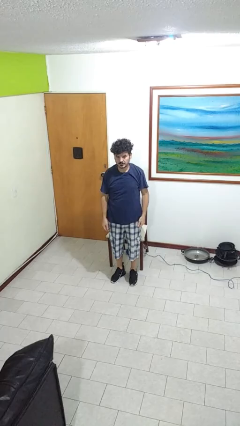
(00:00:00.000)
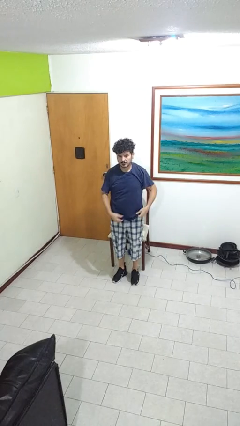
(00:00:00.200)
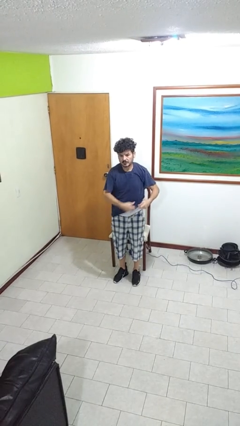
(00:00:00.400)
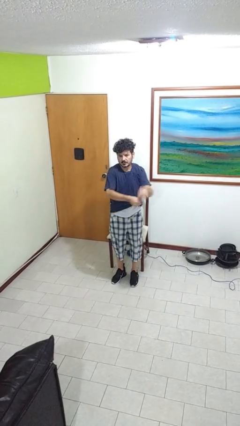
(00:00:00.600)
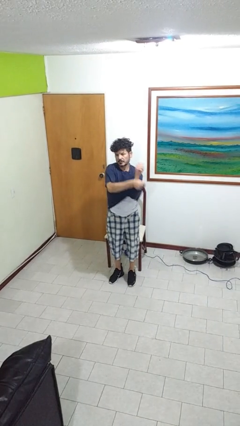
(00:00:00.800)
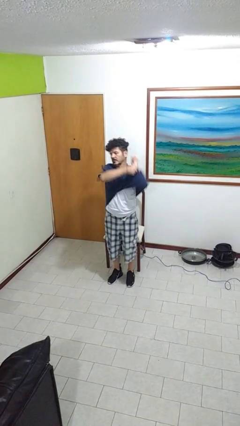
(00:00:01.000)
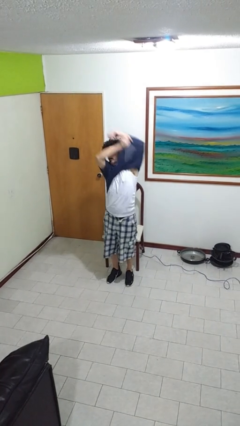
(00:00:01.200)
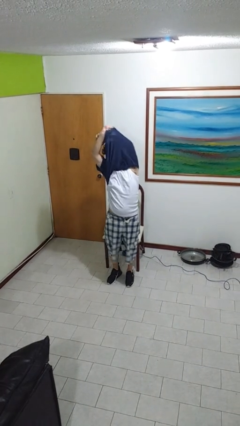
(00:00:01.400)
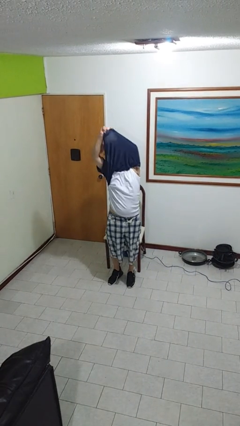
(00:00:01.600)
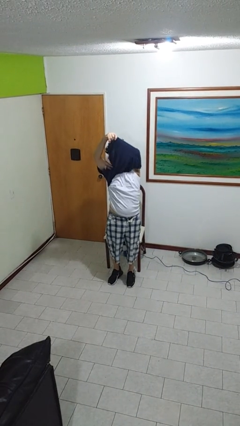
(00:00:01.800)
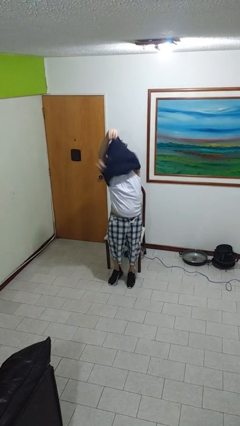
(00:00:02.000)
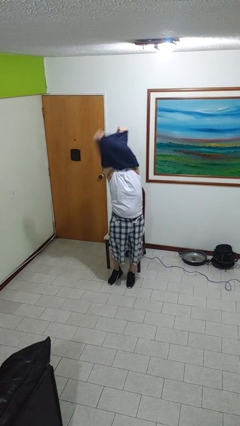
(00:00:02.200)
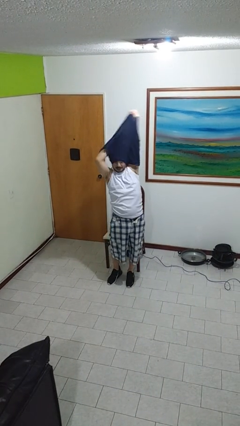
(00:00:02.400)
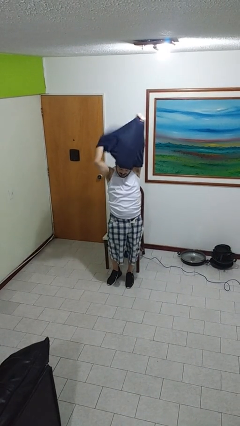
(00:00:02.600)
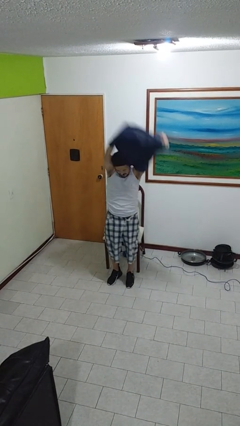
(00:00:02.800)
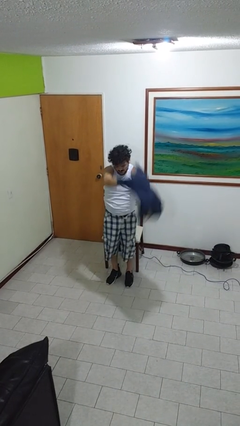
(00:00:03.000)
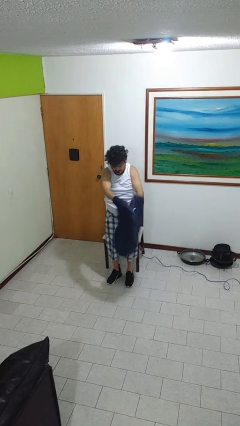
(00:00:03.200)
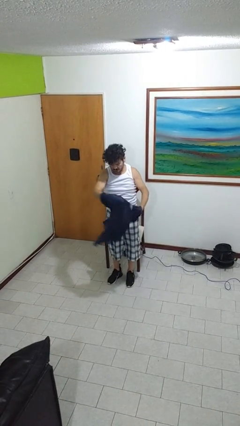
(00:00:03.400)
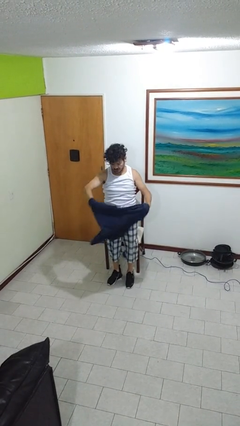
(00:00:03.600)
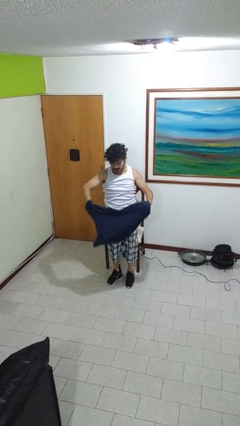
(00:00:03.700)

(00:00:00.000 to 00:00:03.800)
person takes off shirt

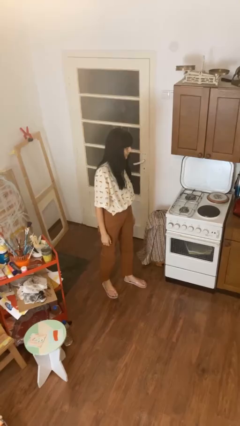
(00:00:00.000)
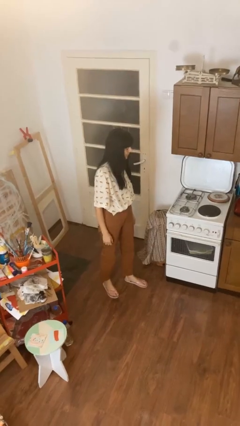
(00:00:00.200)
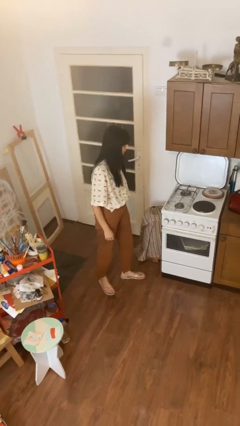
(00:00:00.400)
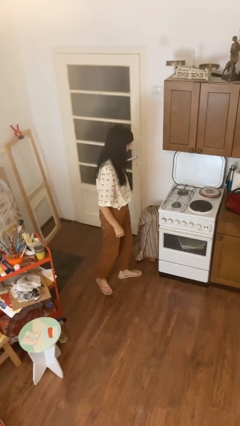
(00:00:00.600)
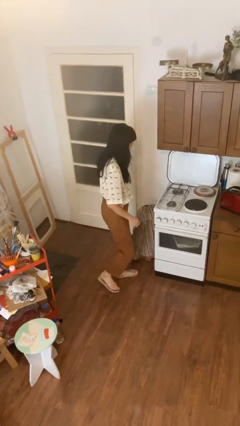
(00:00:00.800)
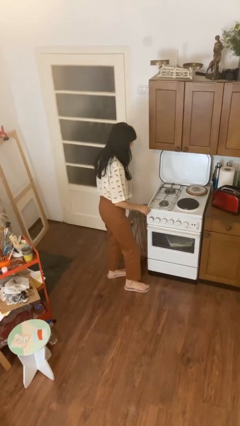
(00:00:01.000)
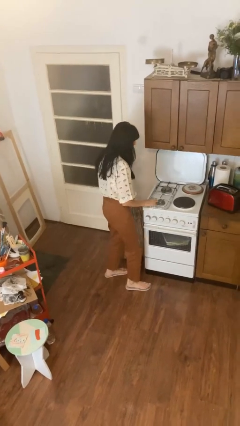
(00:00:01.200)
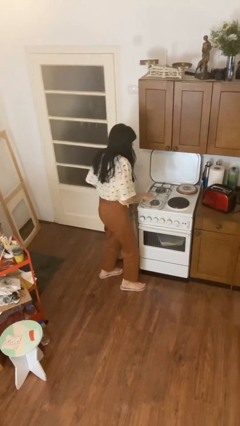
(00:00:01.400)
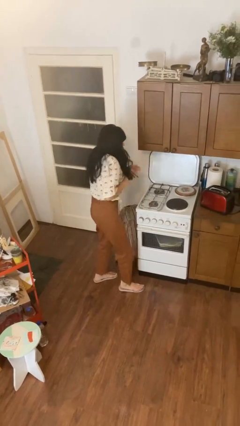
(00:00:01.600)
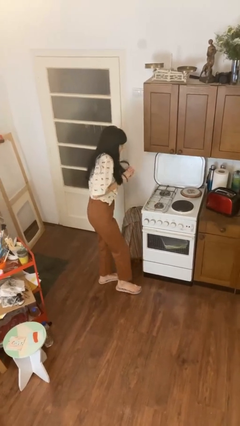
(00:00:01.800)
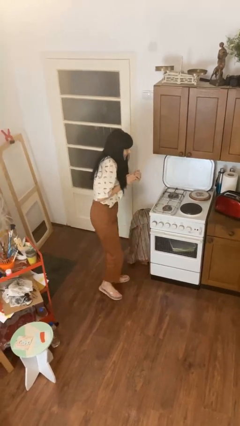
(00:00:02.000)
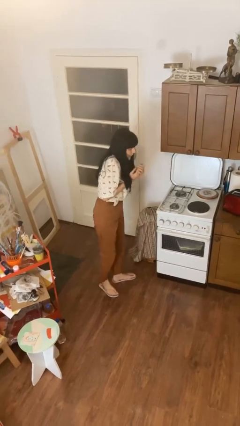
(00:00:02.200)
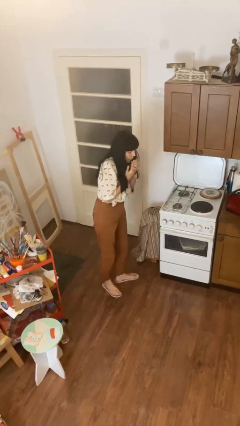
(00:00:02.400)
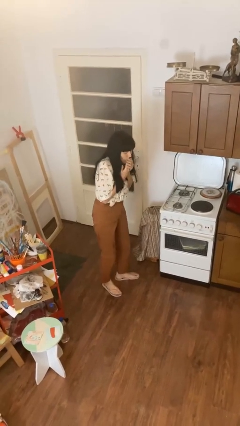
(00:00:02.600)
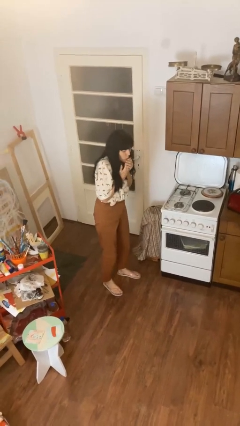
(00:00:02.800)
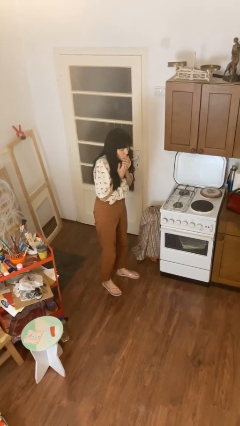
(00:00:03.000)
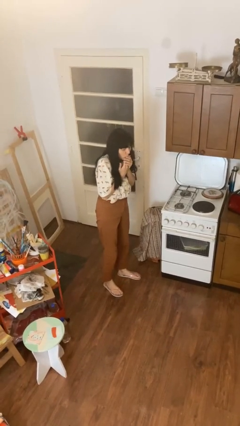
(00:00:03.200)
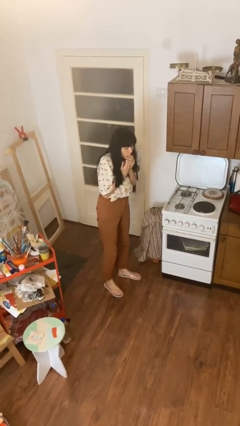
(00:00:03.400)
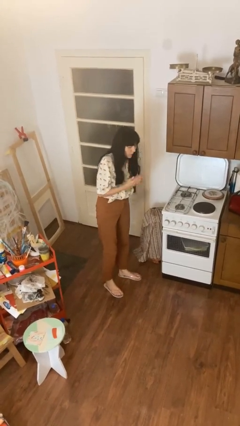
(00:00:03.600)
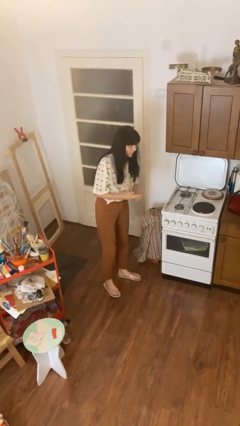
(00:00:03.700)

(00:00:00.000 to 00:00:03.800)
person burns hand

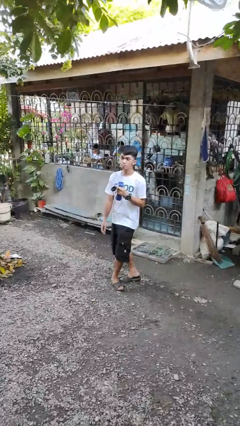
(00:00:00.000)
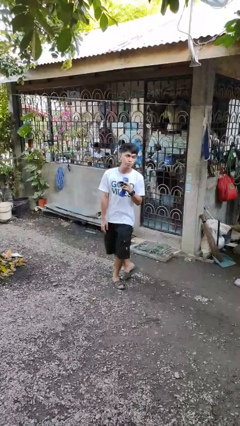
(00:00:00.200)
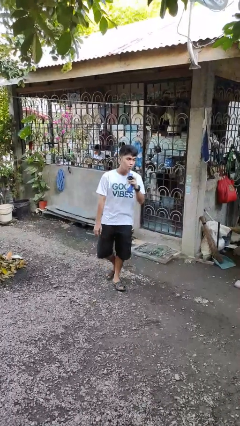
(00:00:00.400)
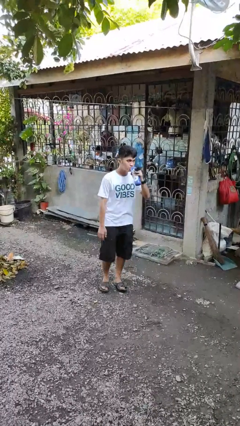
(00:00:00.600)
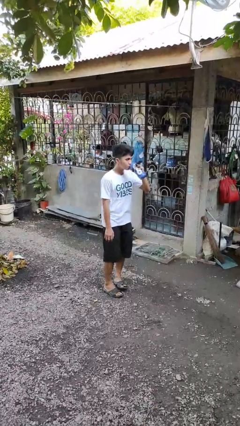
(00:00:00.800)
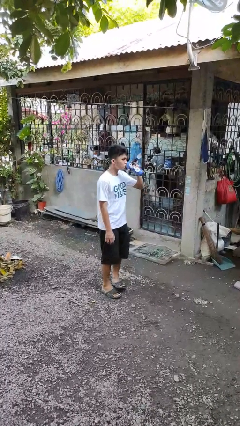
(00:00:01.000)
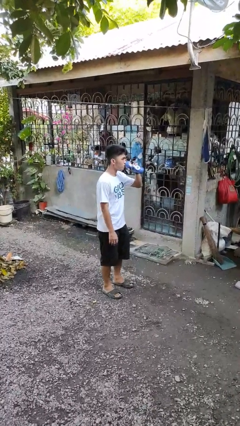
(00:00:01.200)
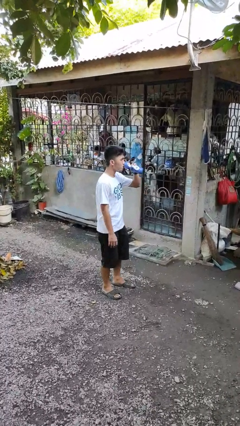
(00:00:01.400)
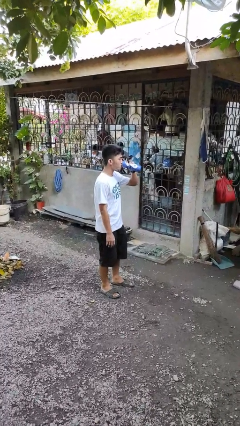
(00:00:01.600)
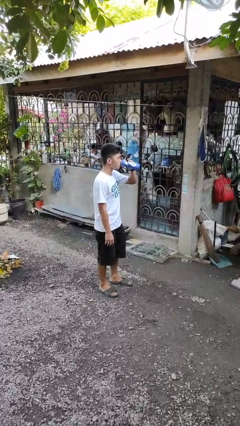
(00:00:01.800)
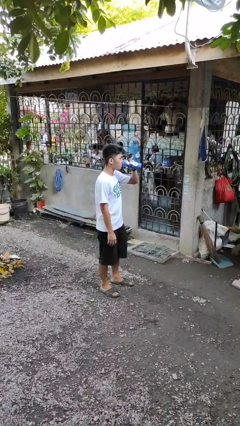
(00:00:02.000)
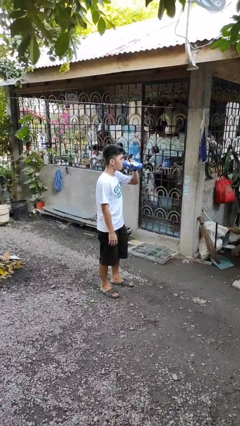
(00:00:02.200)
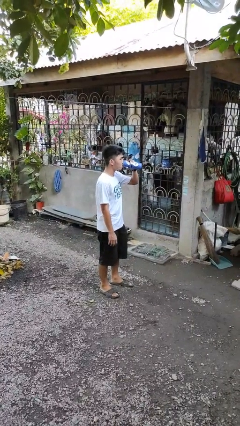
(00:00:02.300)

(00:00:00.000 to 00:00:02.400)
person drinks from bottle

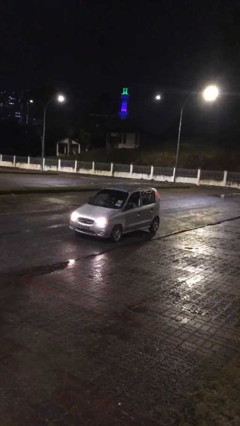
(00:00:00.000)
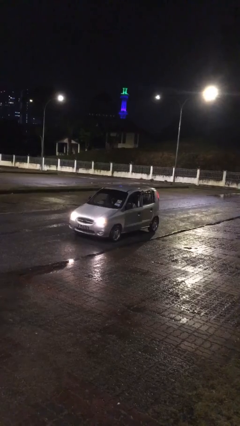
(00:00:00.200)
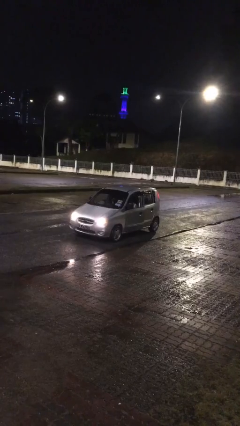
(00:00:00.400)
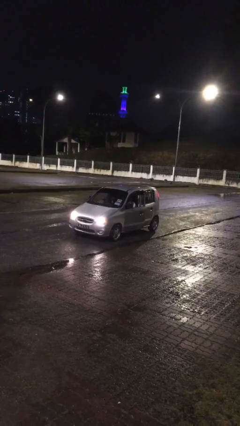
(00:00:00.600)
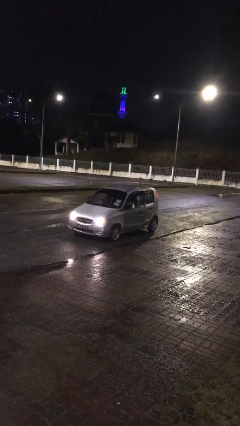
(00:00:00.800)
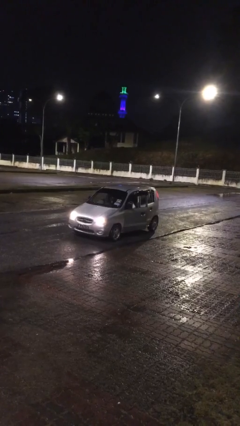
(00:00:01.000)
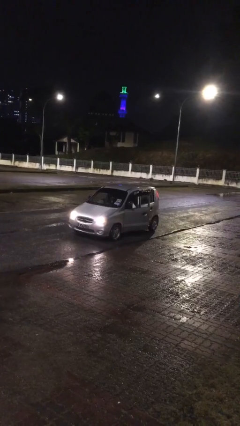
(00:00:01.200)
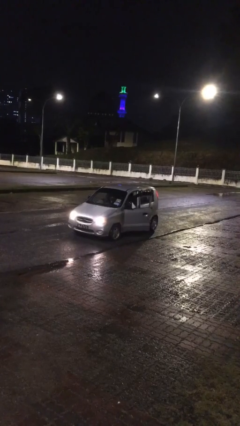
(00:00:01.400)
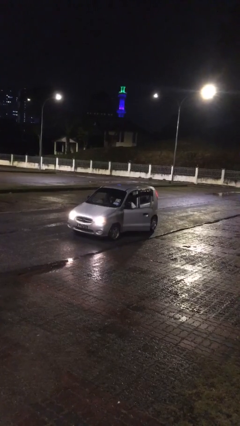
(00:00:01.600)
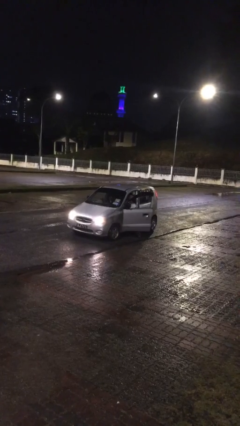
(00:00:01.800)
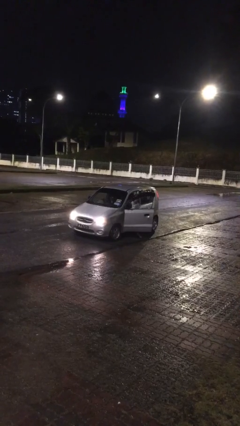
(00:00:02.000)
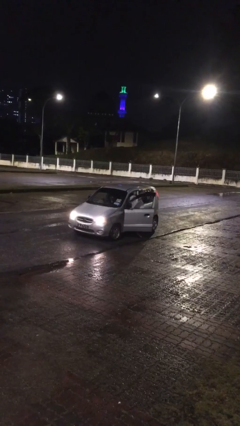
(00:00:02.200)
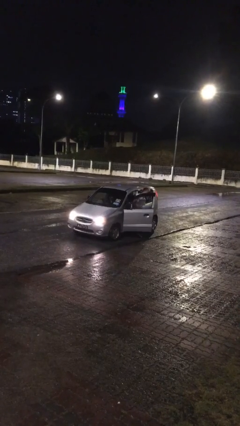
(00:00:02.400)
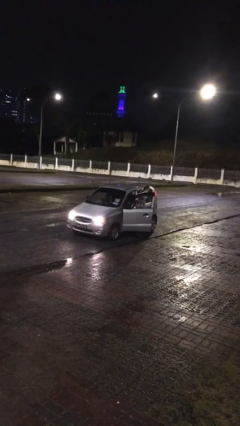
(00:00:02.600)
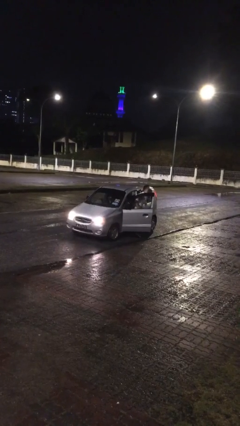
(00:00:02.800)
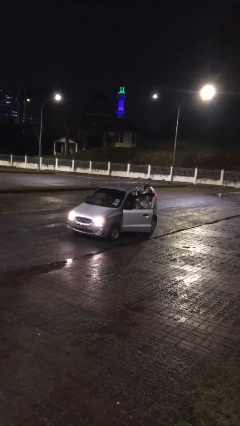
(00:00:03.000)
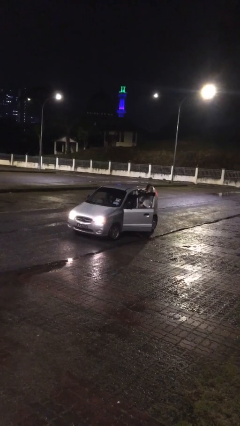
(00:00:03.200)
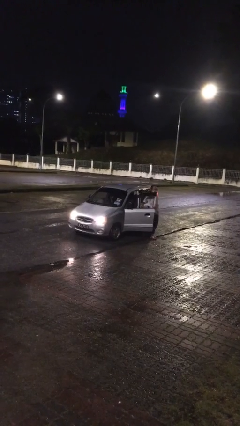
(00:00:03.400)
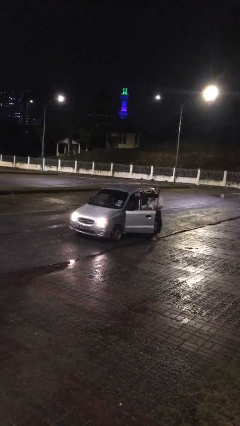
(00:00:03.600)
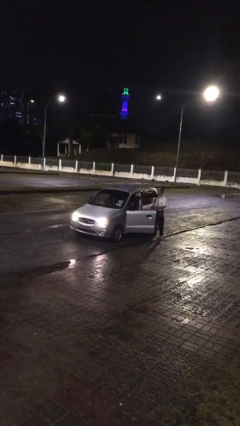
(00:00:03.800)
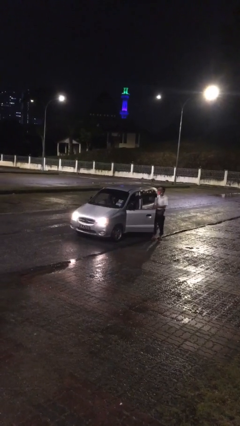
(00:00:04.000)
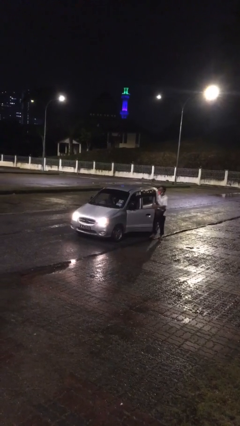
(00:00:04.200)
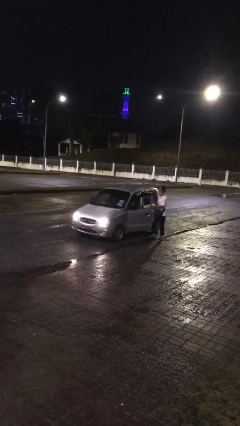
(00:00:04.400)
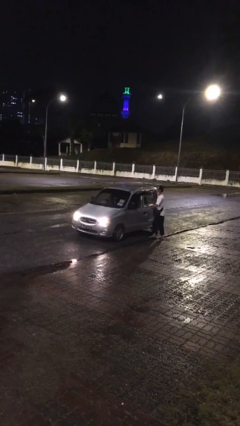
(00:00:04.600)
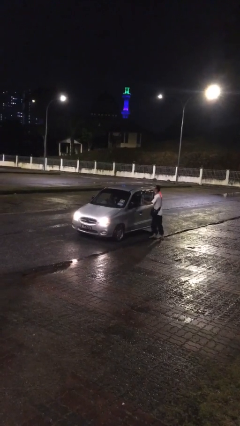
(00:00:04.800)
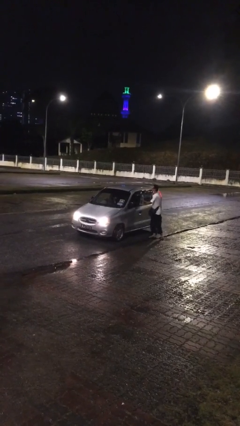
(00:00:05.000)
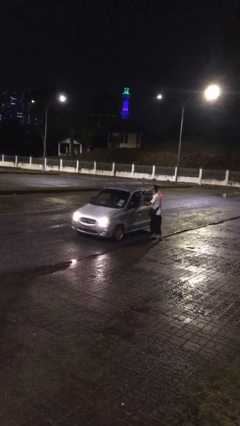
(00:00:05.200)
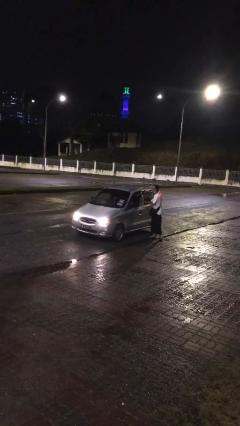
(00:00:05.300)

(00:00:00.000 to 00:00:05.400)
car drops off person

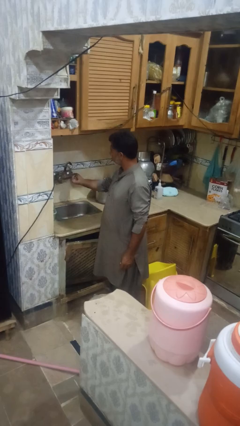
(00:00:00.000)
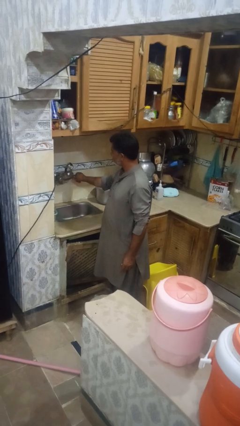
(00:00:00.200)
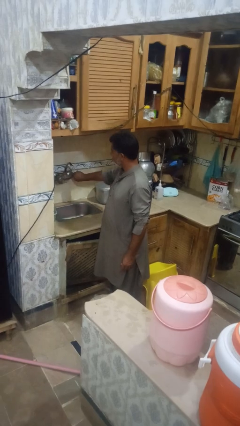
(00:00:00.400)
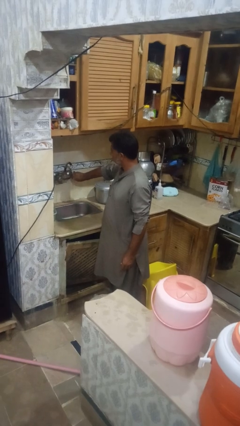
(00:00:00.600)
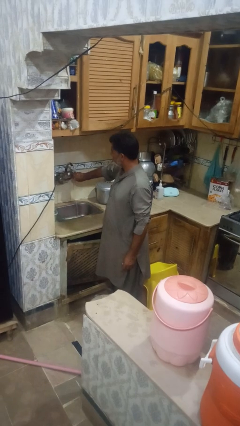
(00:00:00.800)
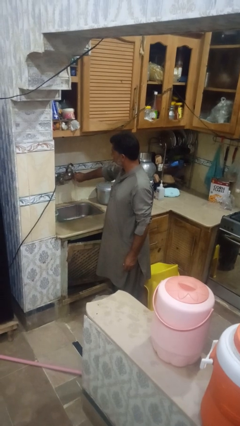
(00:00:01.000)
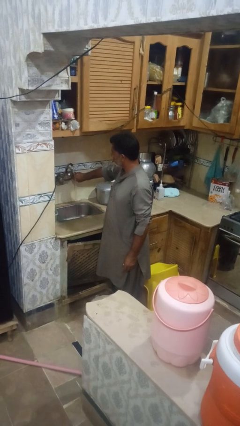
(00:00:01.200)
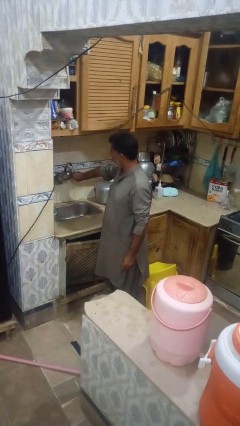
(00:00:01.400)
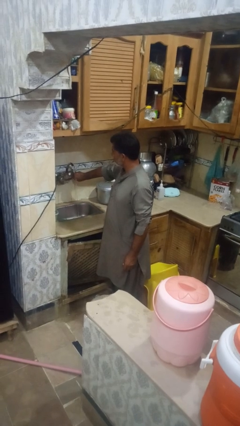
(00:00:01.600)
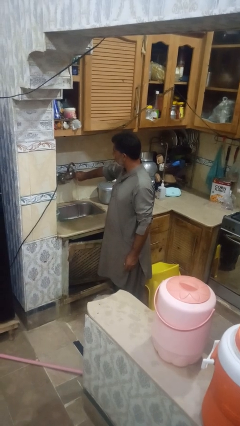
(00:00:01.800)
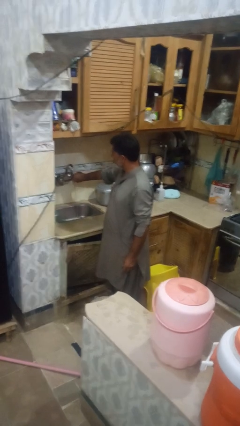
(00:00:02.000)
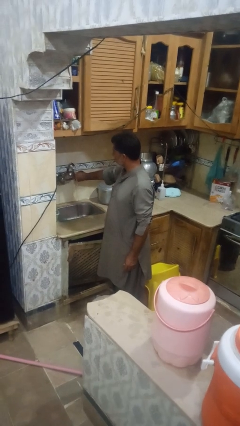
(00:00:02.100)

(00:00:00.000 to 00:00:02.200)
person turns on faucet
